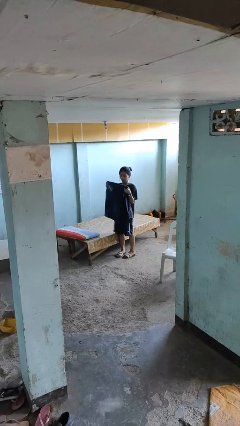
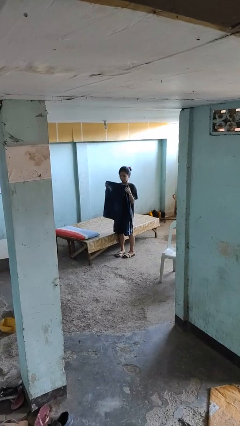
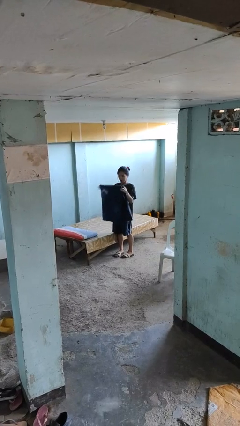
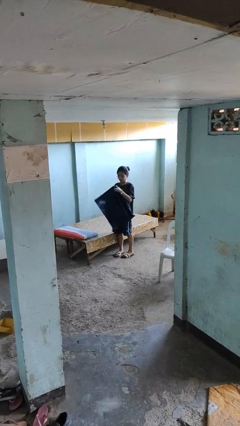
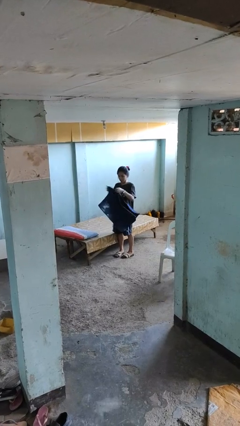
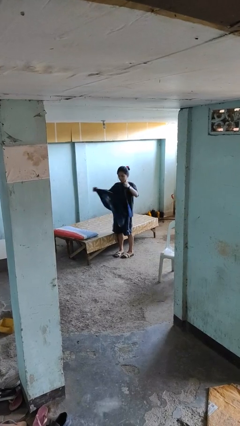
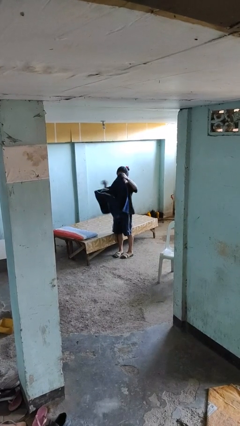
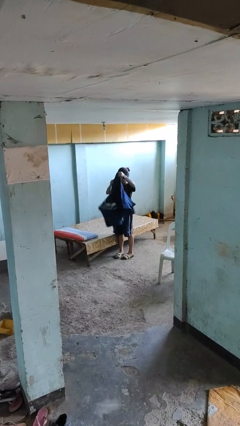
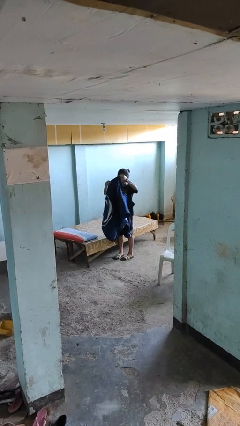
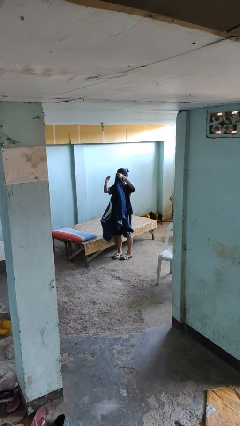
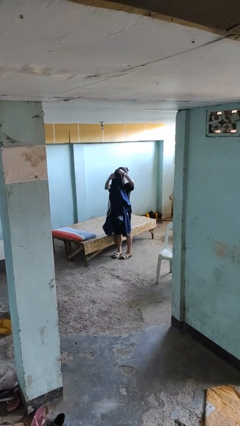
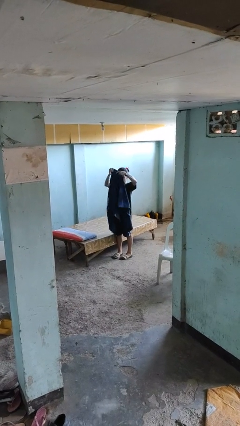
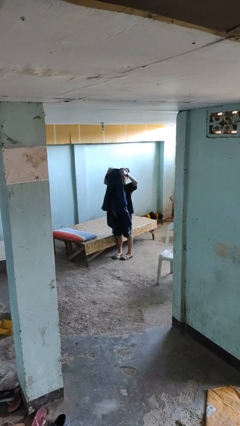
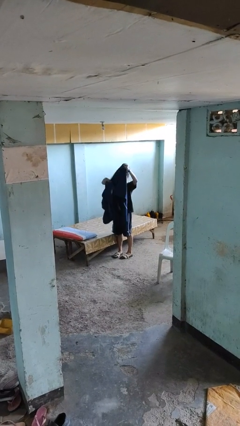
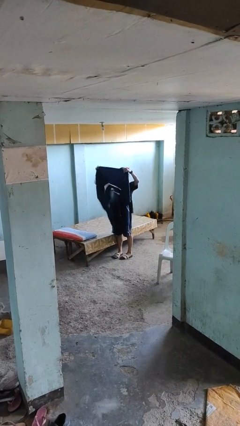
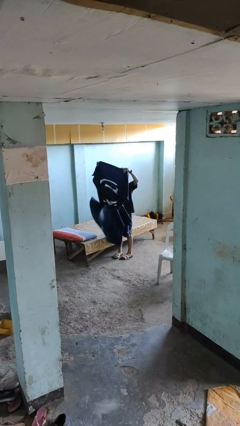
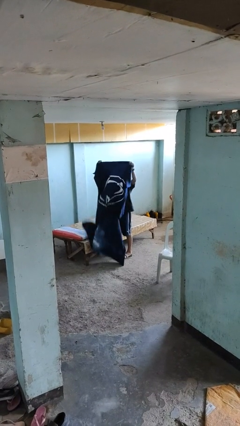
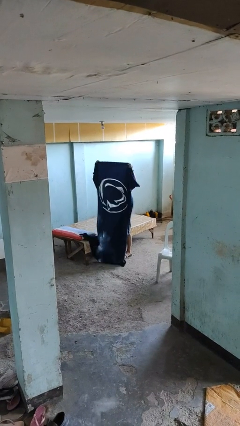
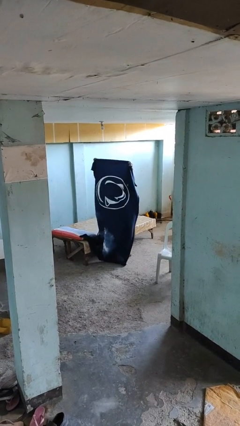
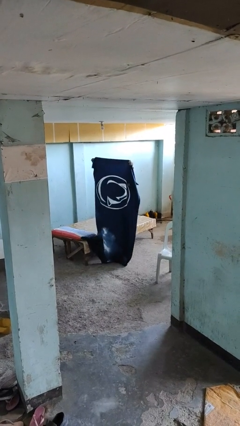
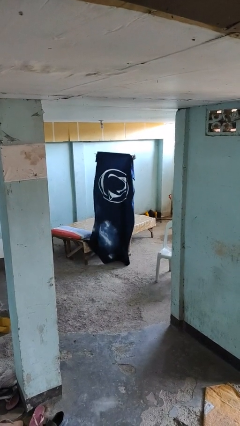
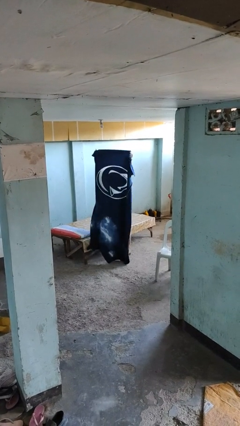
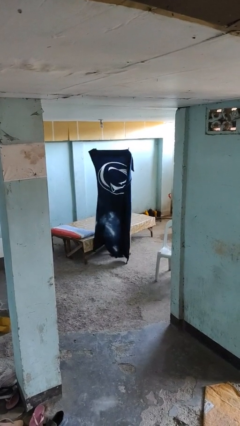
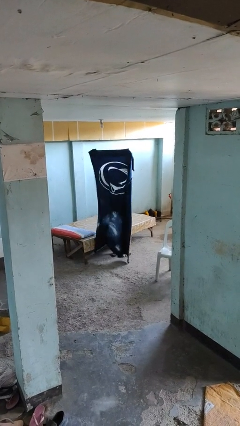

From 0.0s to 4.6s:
person unfolds blanket

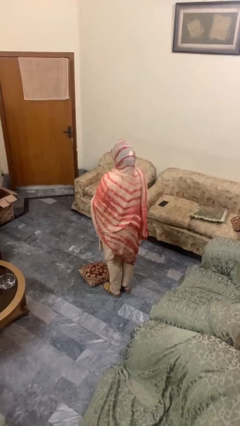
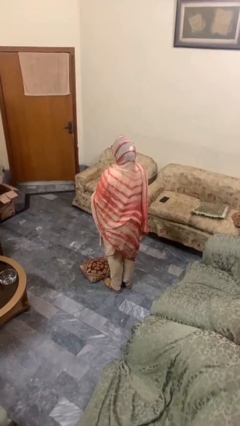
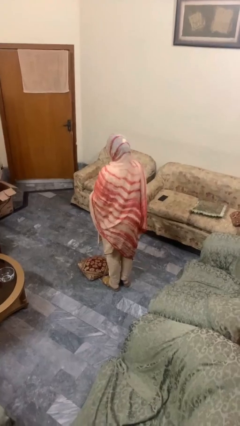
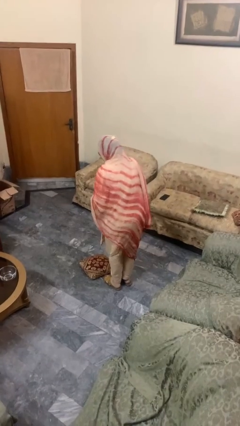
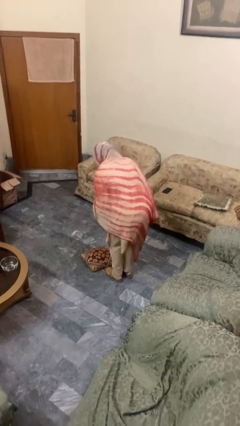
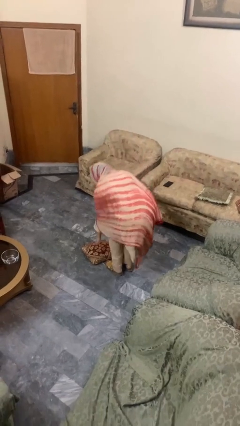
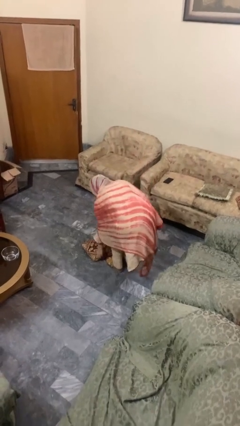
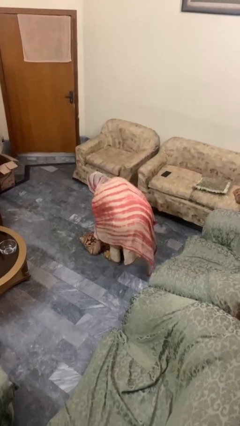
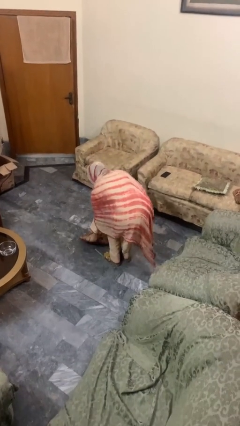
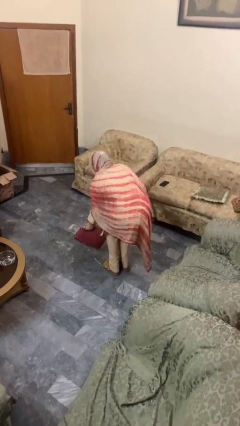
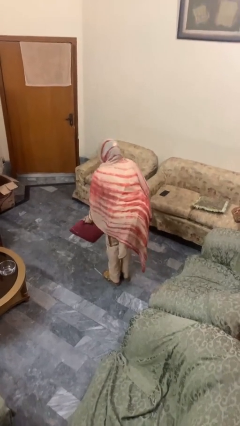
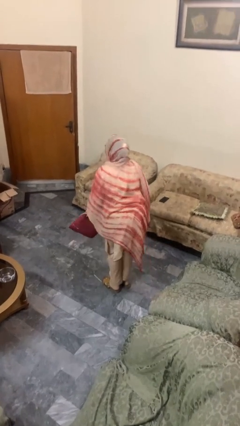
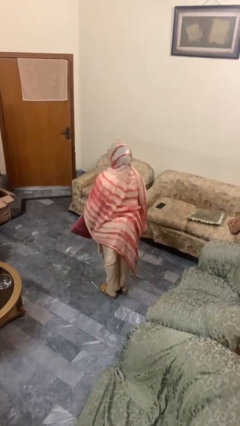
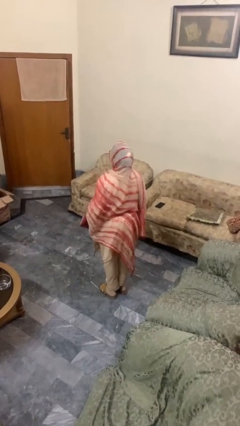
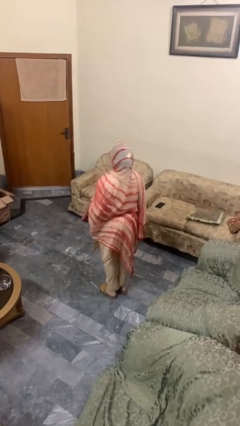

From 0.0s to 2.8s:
person picks up object from floor

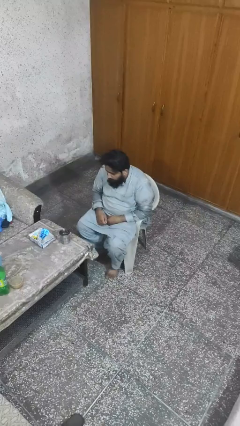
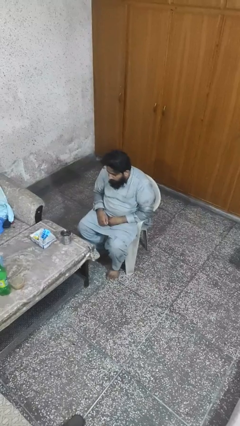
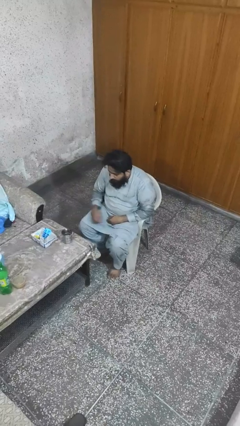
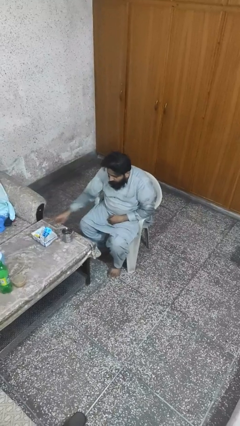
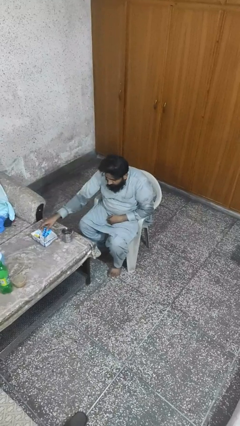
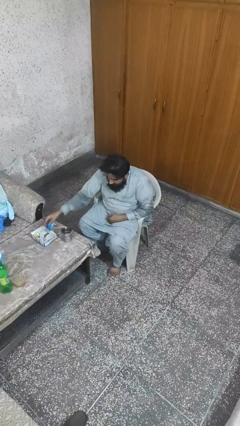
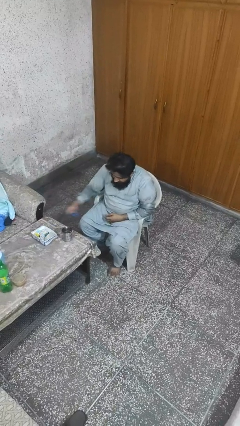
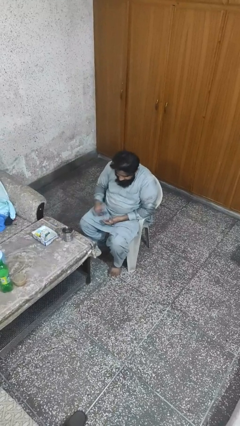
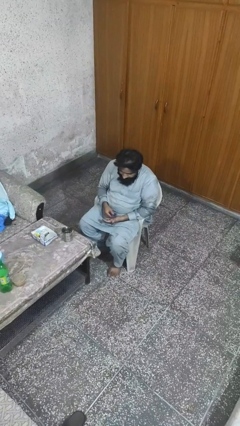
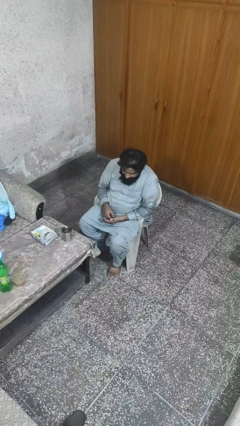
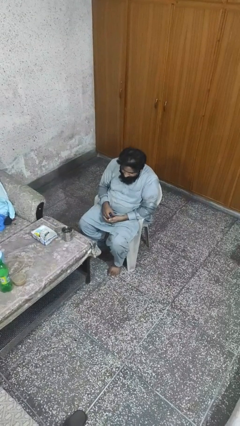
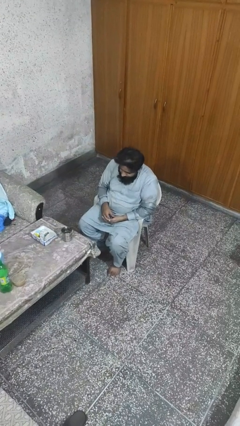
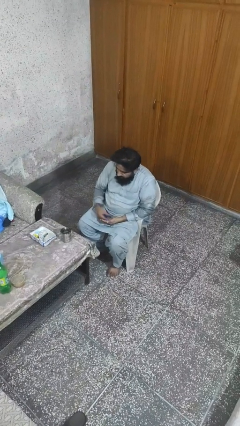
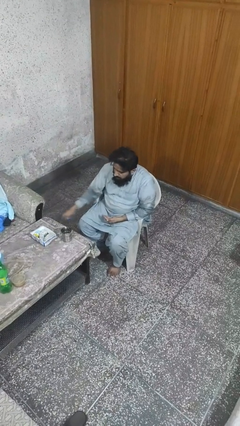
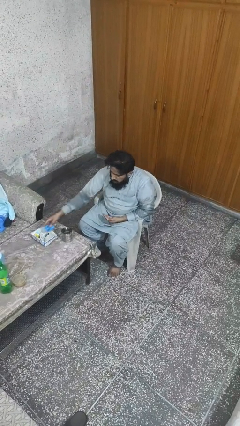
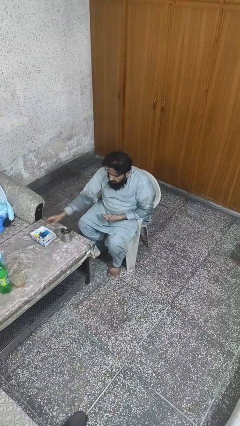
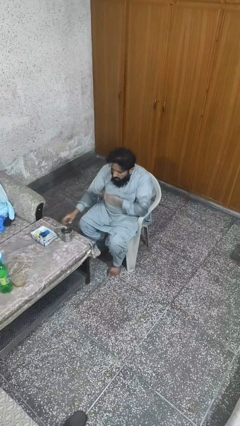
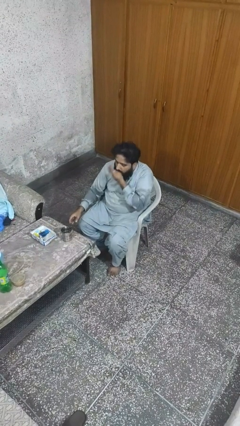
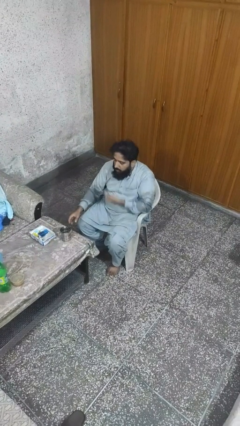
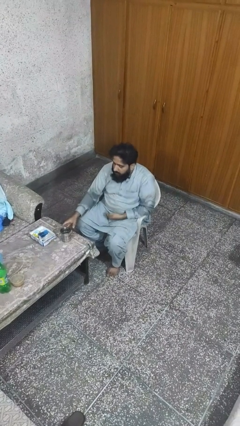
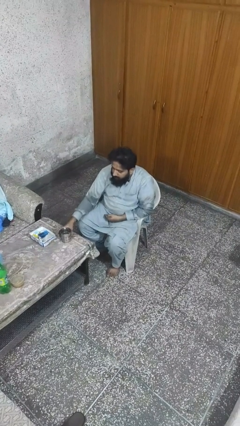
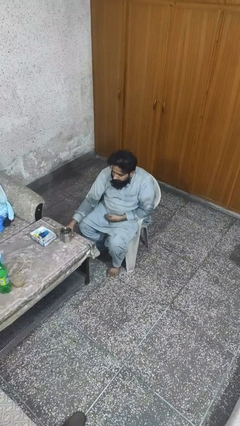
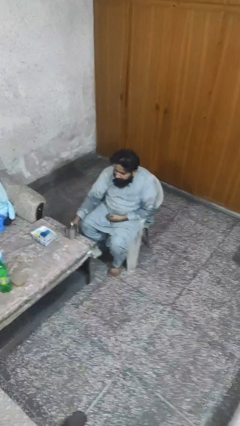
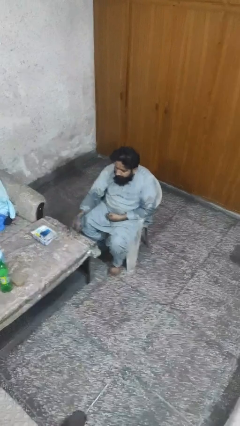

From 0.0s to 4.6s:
person takes medicine pills

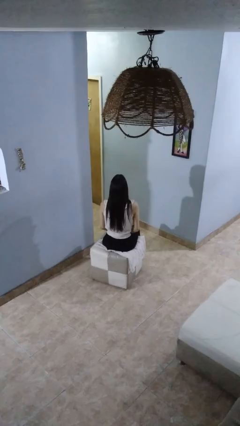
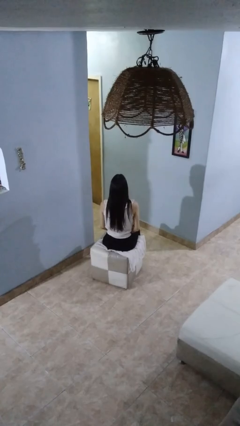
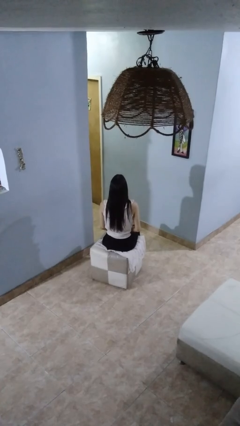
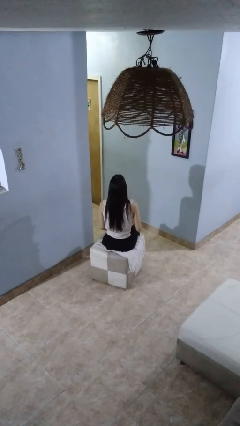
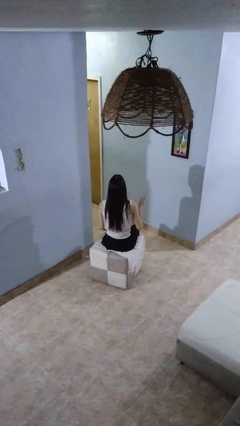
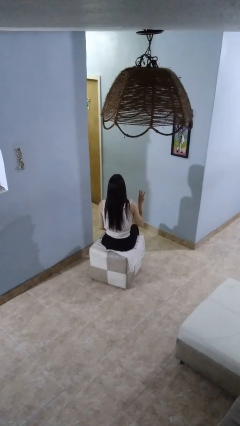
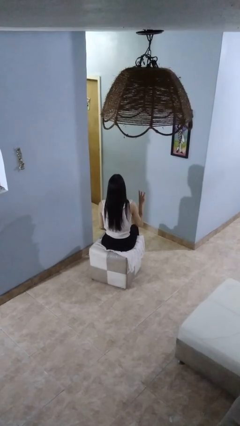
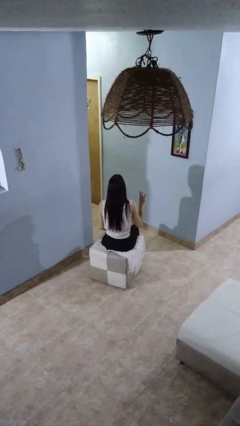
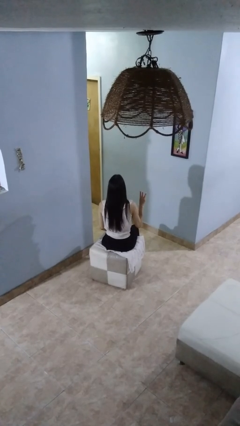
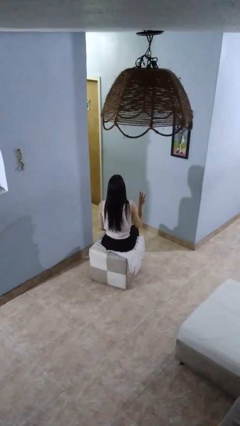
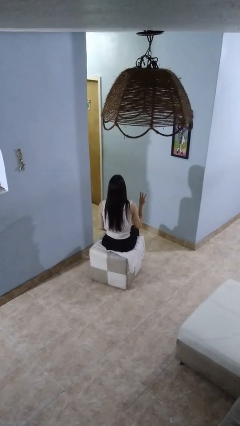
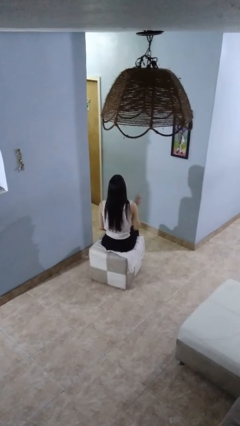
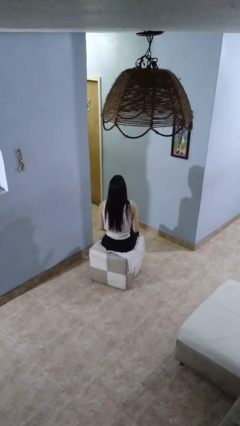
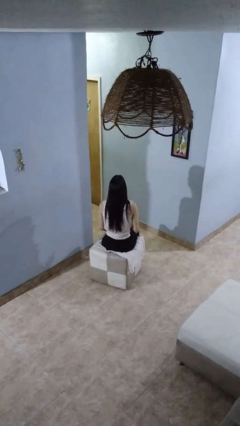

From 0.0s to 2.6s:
person gestures number three

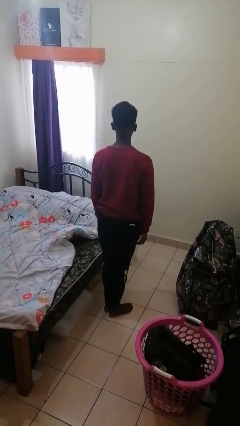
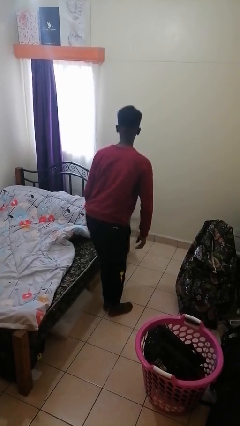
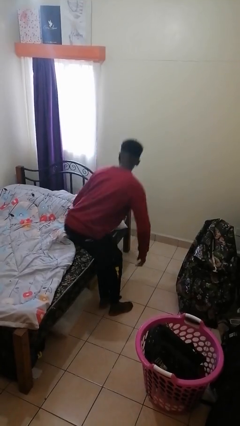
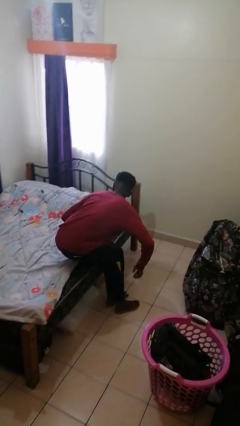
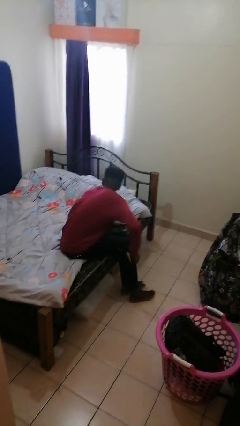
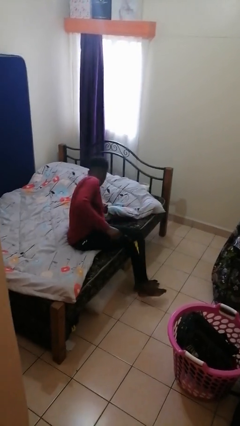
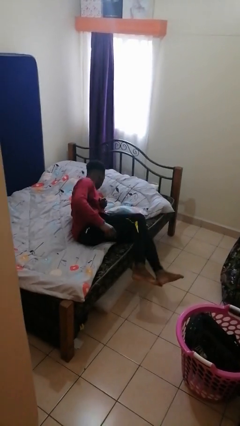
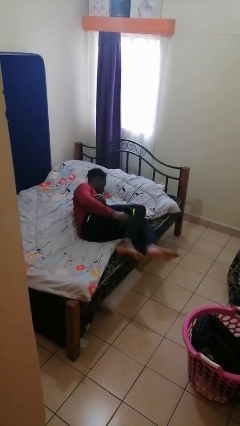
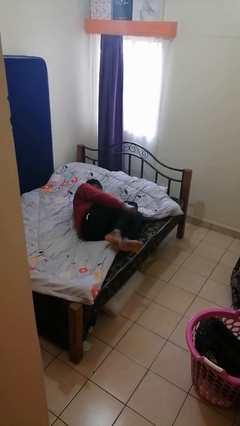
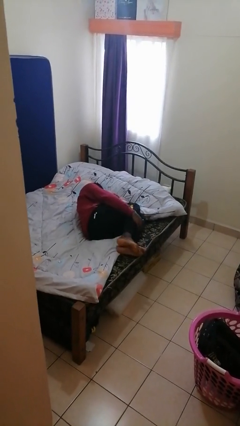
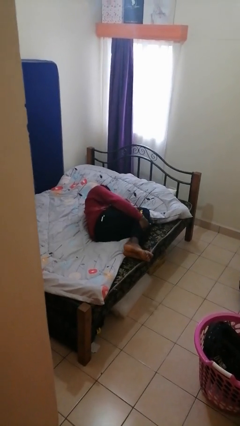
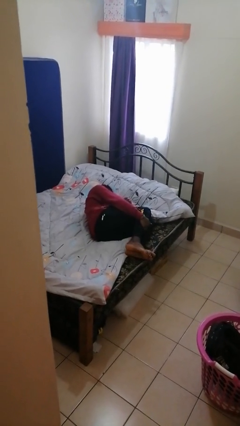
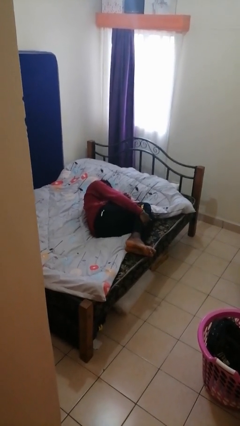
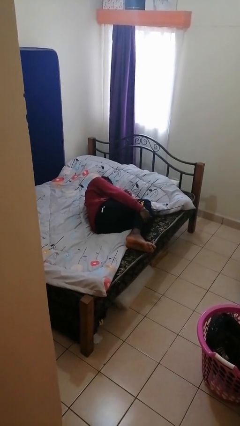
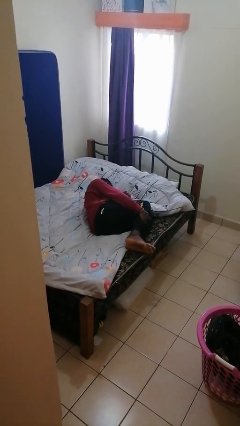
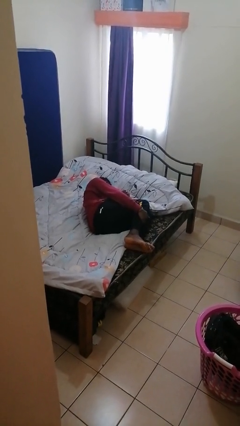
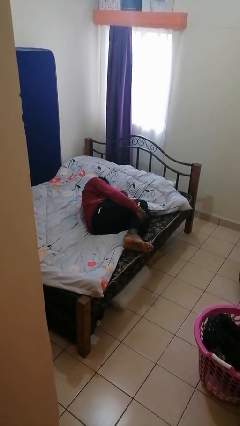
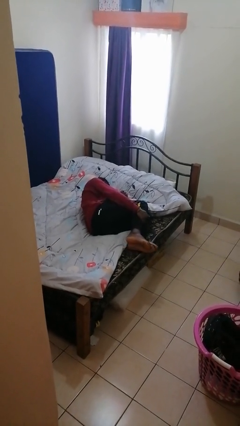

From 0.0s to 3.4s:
person lies down on bed
